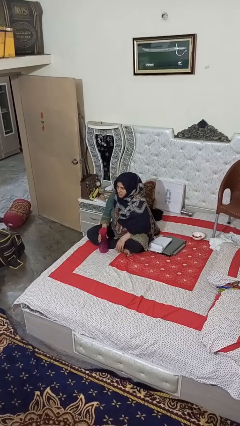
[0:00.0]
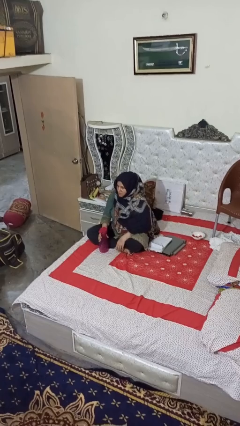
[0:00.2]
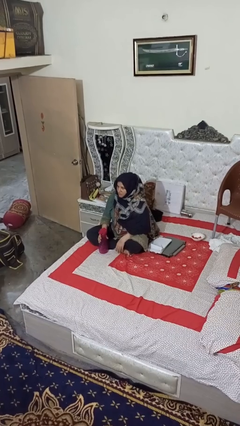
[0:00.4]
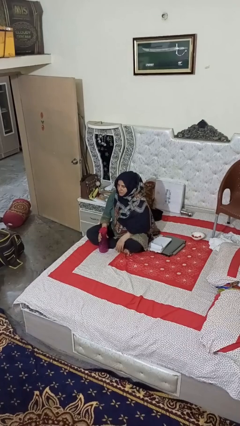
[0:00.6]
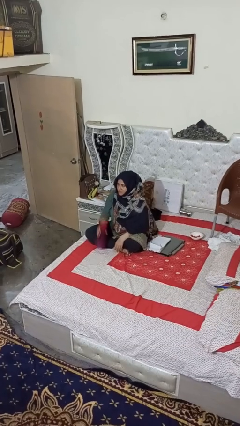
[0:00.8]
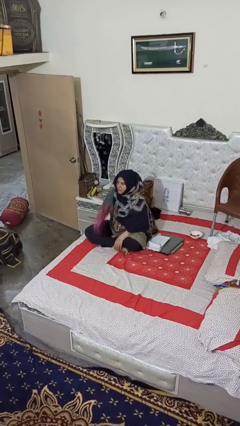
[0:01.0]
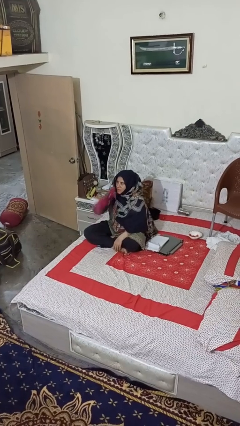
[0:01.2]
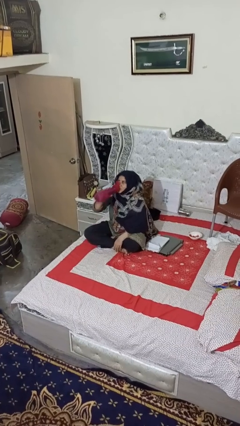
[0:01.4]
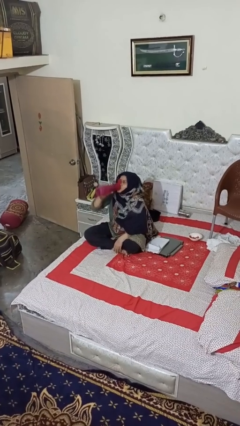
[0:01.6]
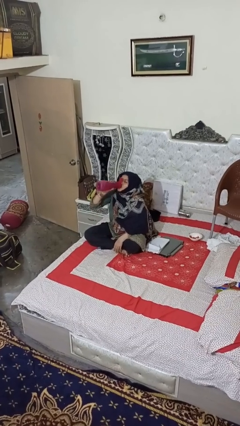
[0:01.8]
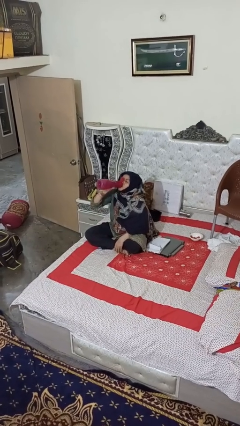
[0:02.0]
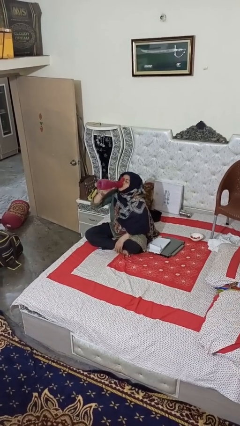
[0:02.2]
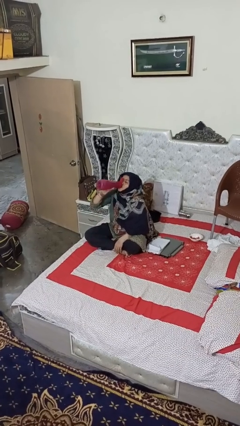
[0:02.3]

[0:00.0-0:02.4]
person drinks from bottle

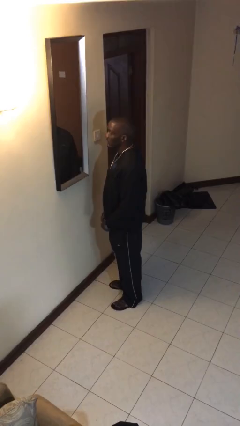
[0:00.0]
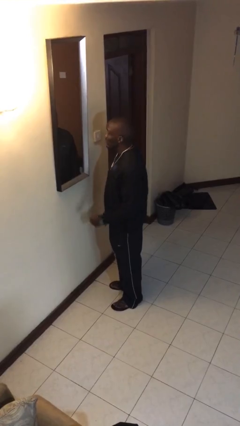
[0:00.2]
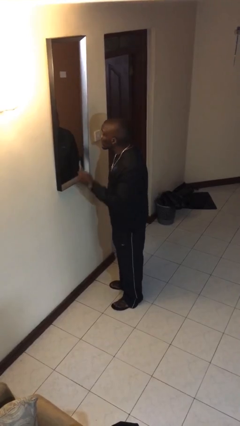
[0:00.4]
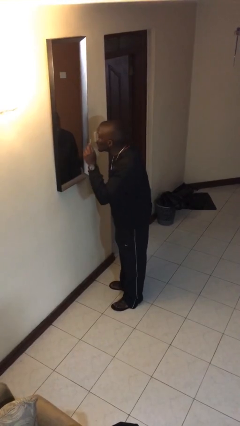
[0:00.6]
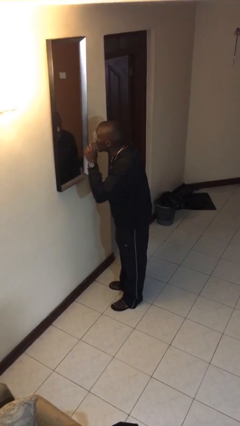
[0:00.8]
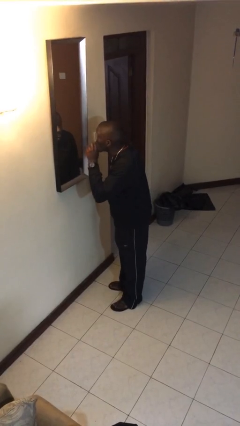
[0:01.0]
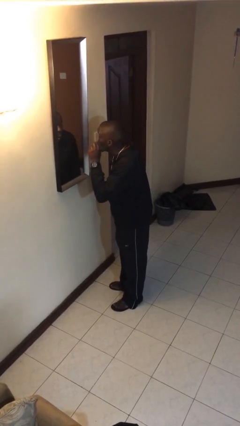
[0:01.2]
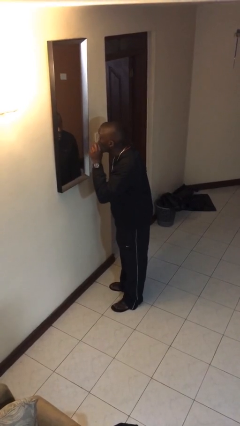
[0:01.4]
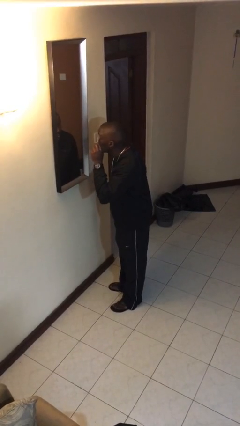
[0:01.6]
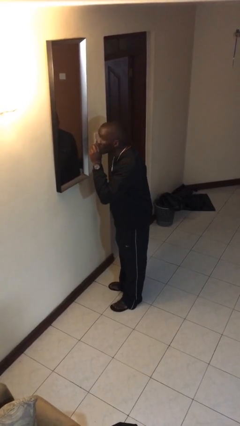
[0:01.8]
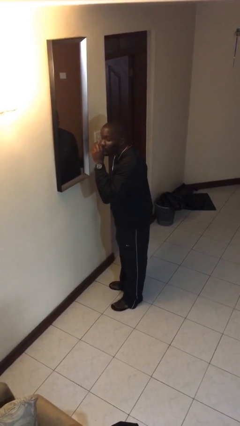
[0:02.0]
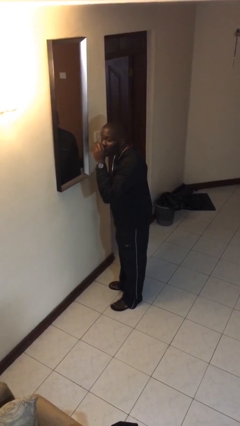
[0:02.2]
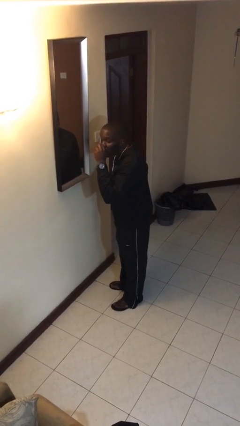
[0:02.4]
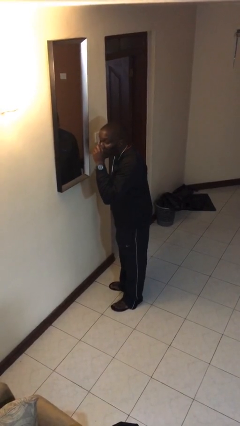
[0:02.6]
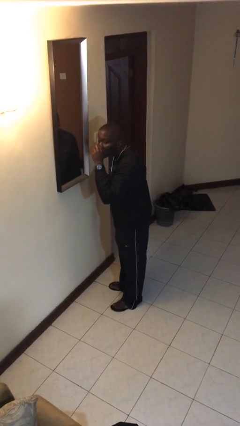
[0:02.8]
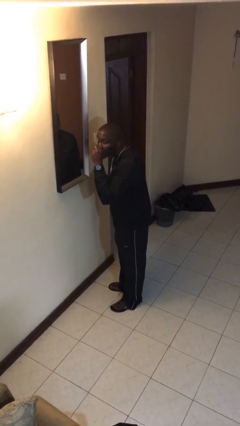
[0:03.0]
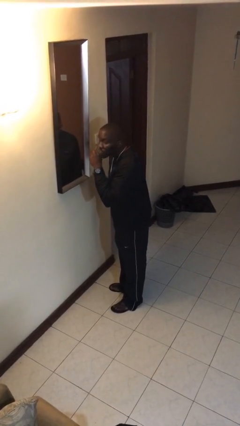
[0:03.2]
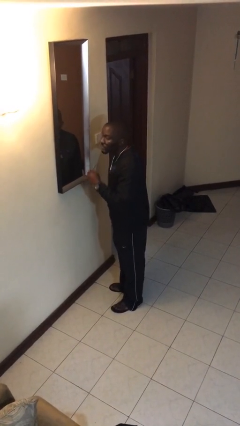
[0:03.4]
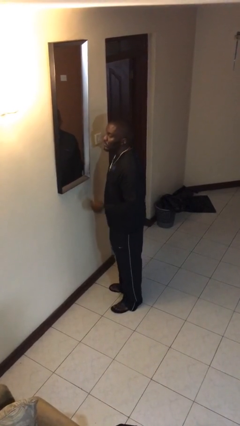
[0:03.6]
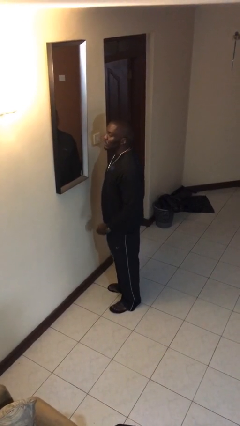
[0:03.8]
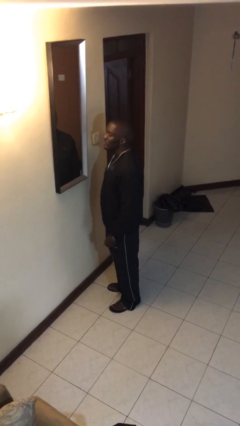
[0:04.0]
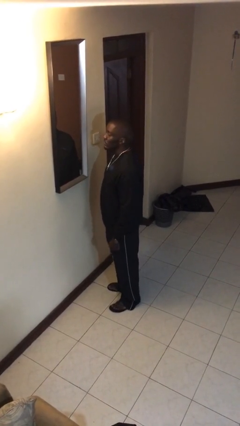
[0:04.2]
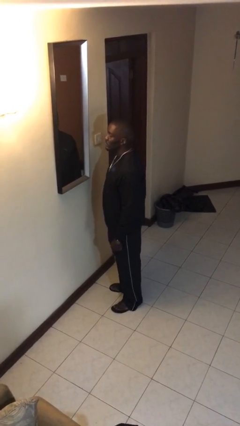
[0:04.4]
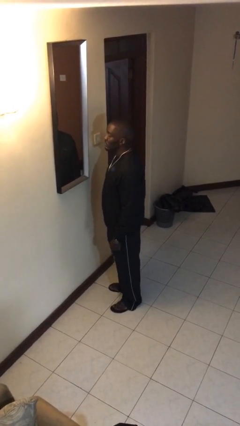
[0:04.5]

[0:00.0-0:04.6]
person applies eye makeup

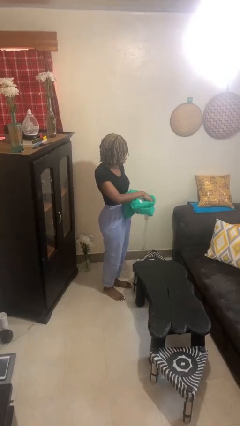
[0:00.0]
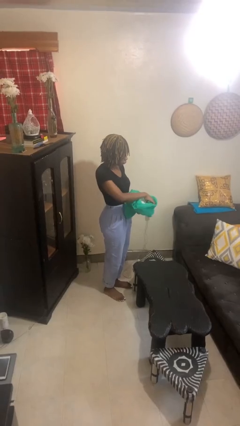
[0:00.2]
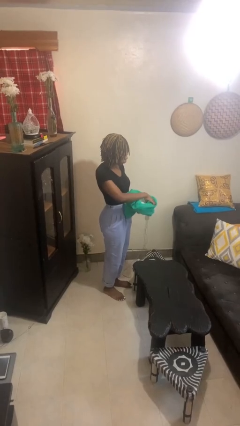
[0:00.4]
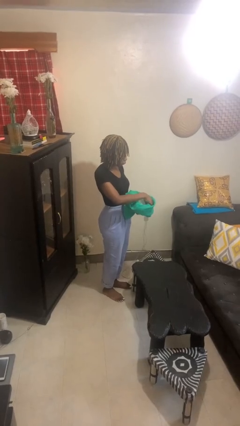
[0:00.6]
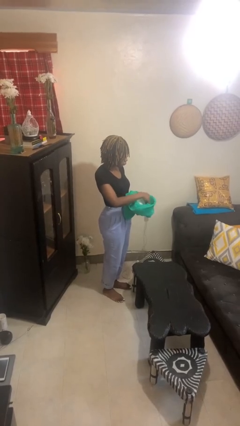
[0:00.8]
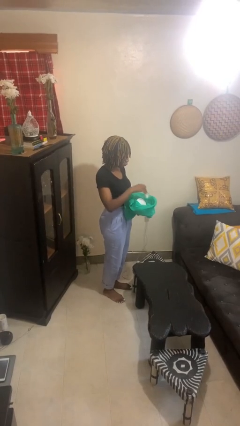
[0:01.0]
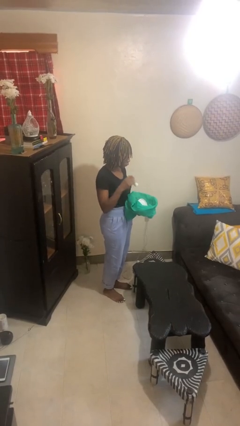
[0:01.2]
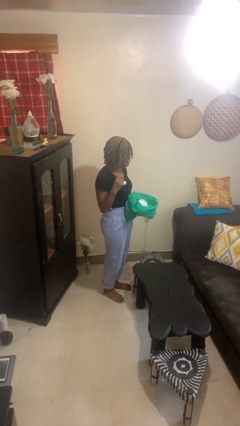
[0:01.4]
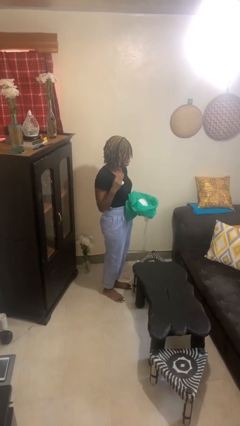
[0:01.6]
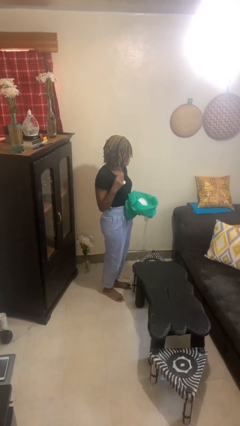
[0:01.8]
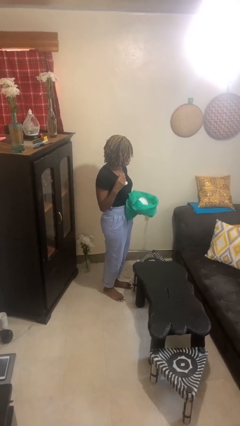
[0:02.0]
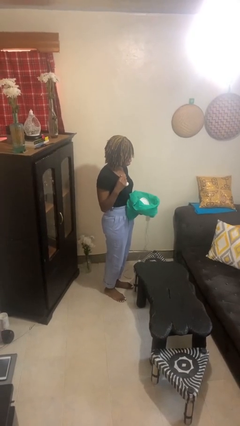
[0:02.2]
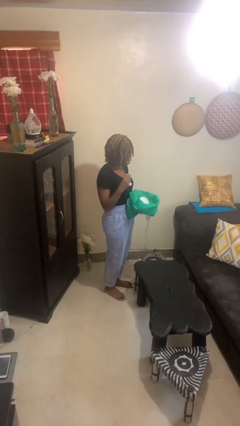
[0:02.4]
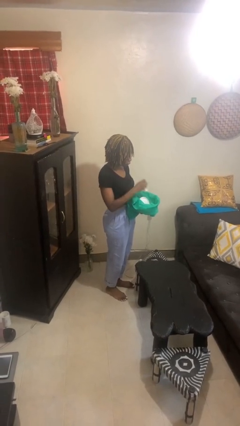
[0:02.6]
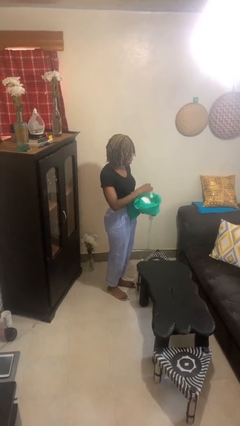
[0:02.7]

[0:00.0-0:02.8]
person takes object from bag

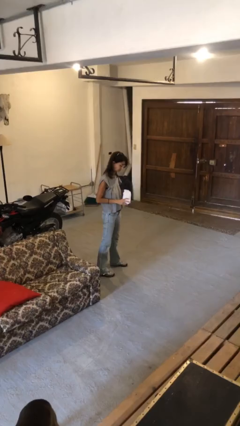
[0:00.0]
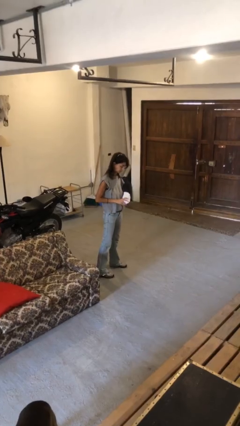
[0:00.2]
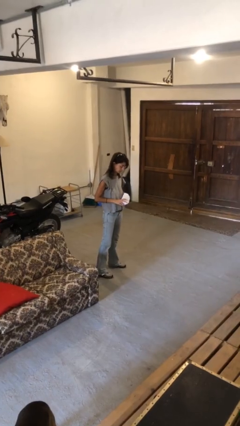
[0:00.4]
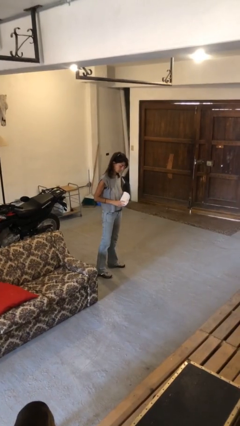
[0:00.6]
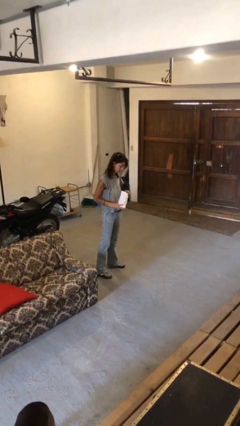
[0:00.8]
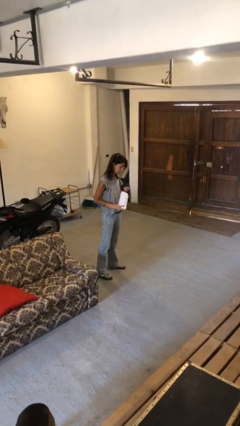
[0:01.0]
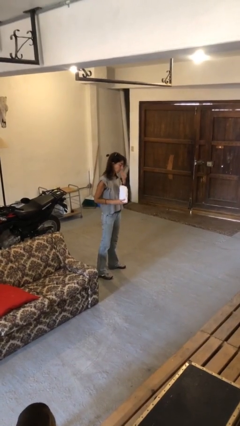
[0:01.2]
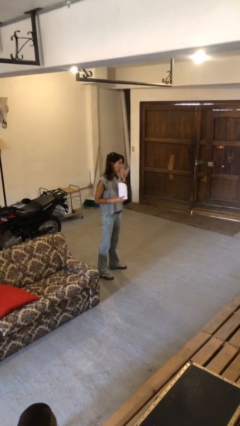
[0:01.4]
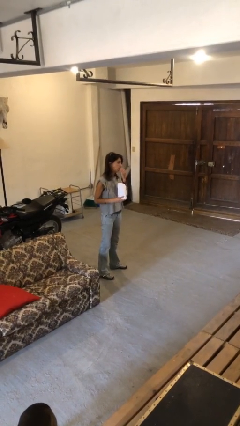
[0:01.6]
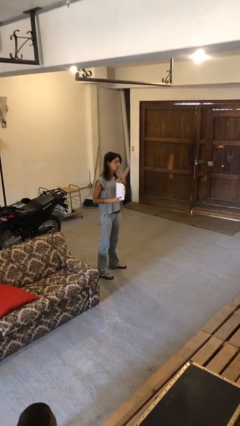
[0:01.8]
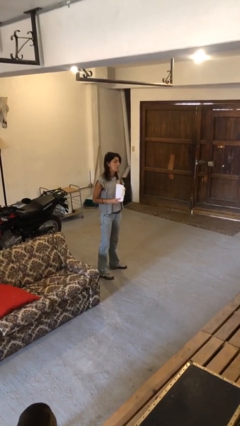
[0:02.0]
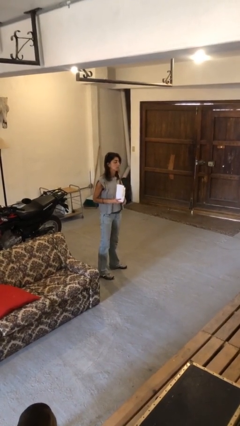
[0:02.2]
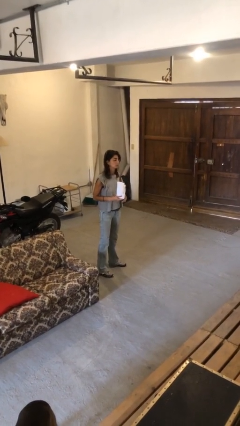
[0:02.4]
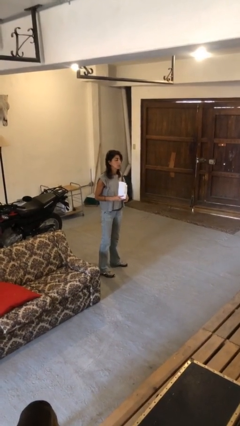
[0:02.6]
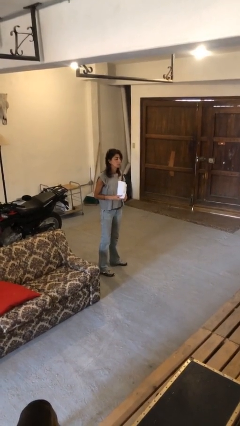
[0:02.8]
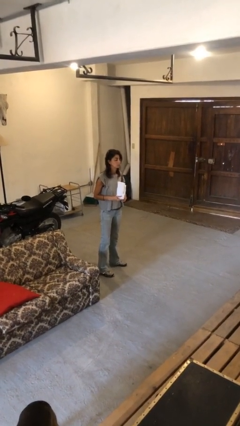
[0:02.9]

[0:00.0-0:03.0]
person eats snack from bag

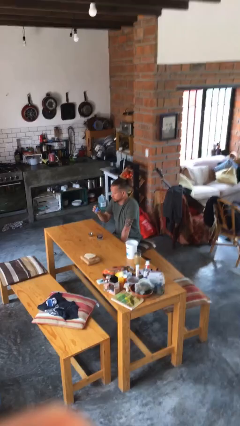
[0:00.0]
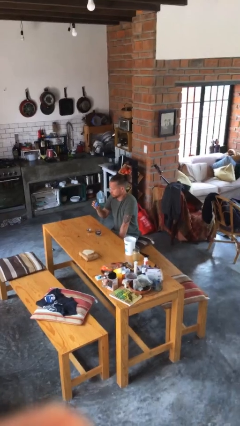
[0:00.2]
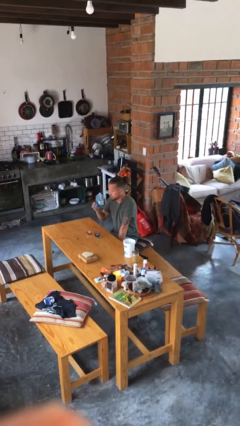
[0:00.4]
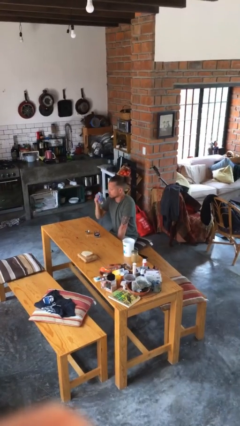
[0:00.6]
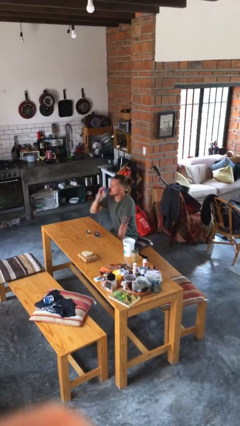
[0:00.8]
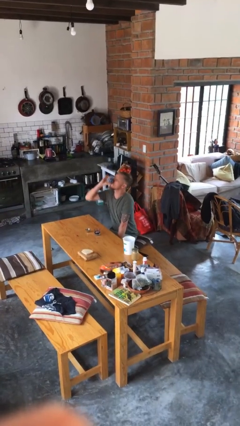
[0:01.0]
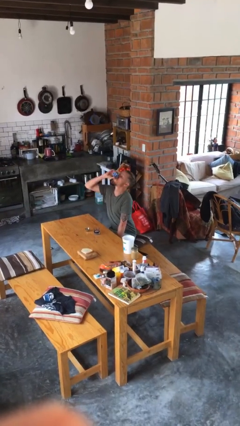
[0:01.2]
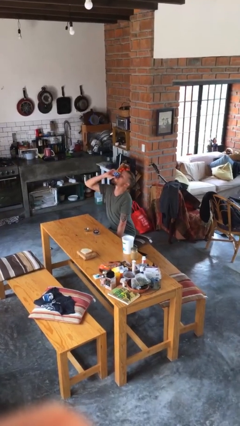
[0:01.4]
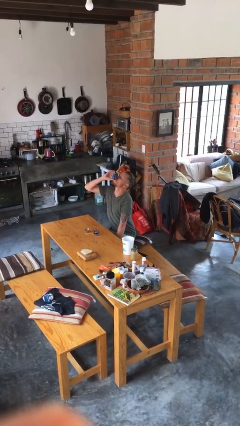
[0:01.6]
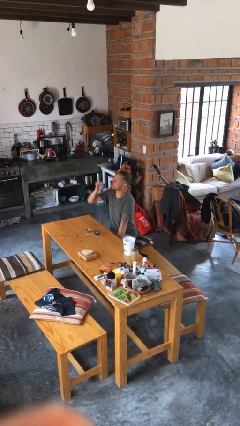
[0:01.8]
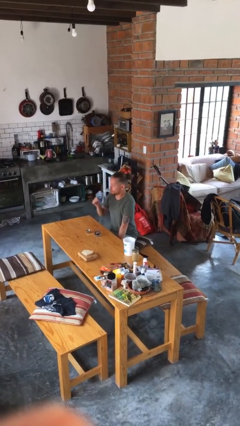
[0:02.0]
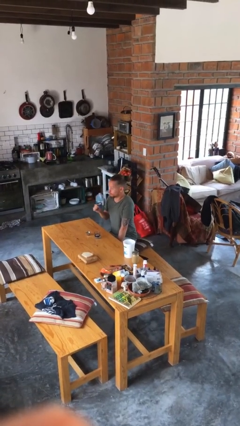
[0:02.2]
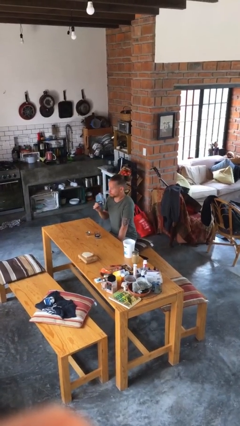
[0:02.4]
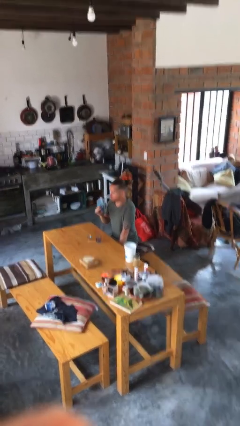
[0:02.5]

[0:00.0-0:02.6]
person drinks from shotglass

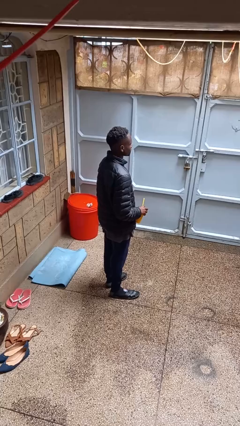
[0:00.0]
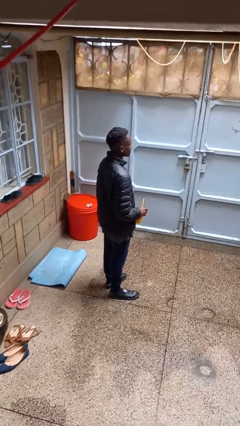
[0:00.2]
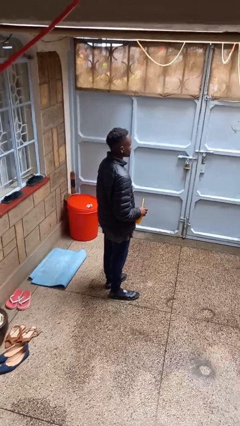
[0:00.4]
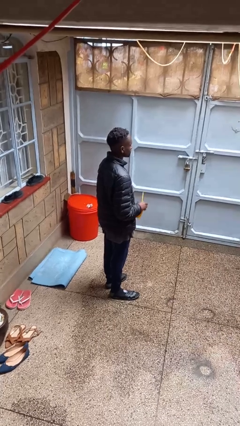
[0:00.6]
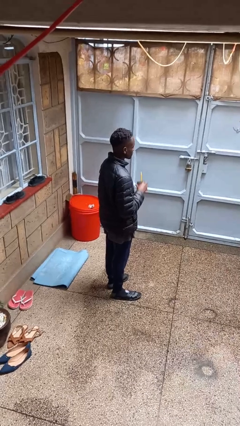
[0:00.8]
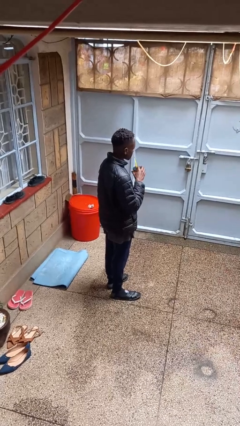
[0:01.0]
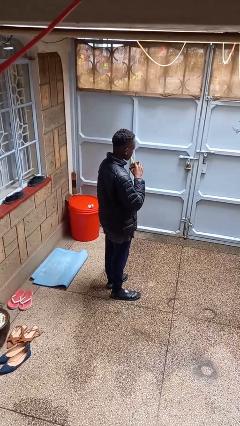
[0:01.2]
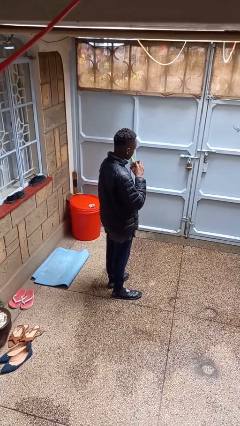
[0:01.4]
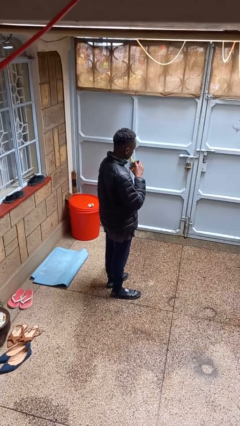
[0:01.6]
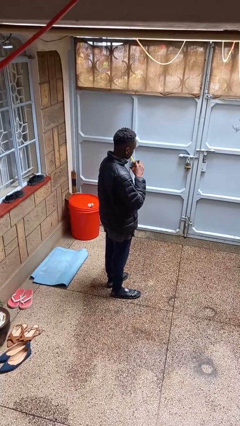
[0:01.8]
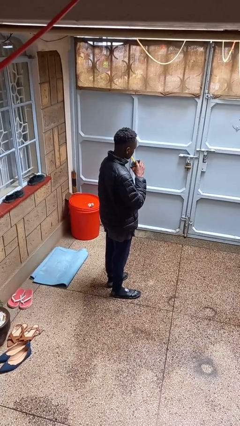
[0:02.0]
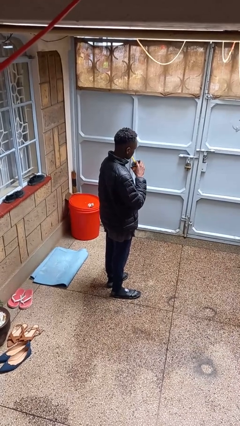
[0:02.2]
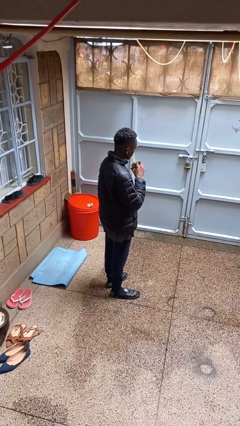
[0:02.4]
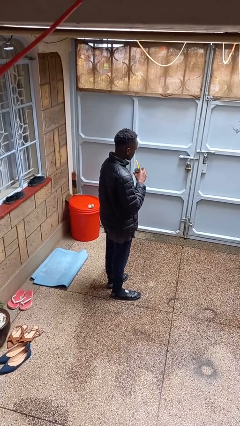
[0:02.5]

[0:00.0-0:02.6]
person drinks from straw
